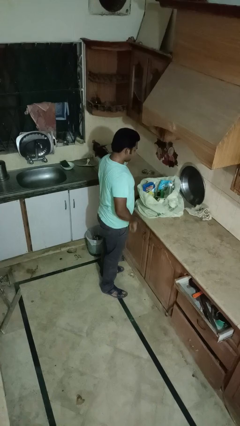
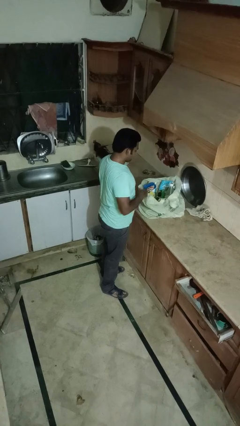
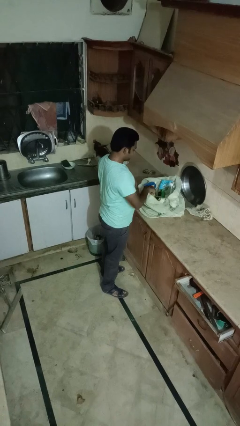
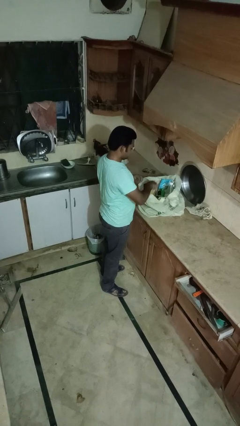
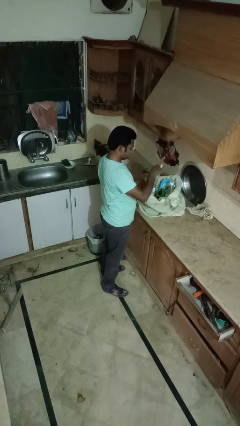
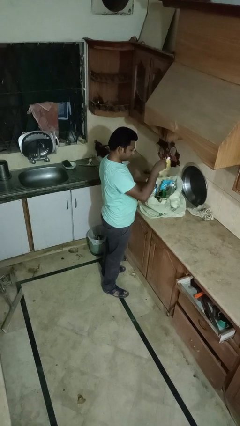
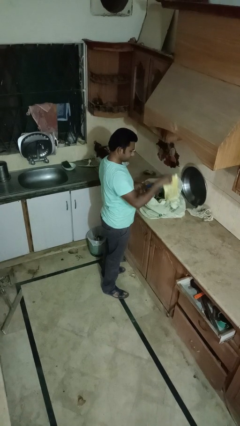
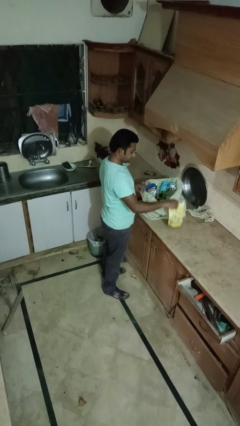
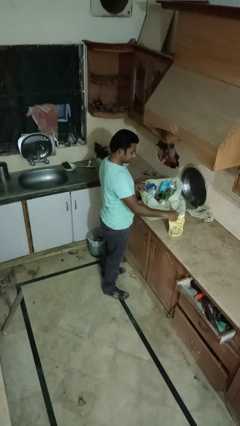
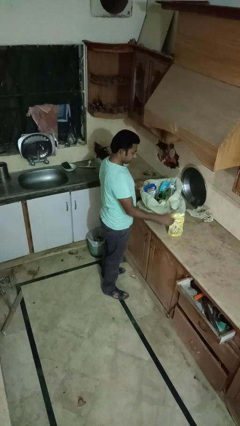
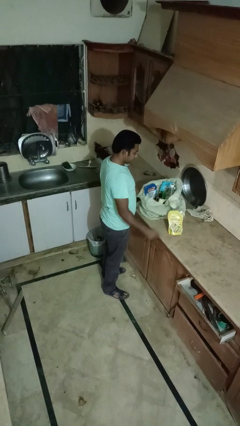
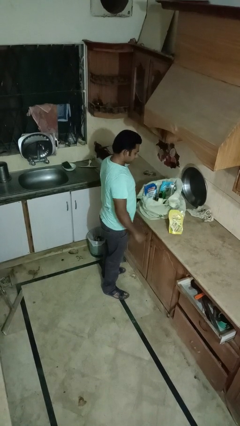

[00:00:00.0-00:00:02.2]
person takes object from bag

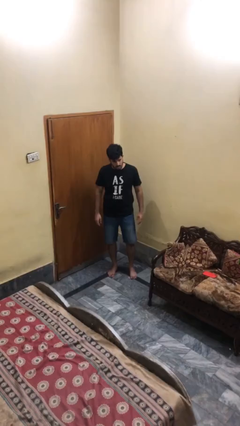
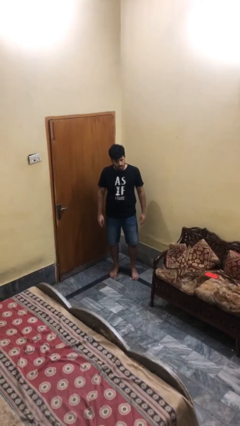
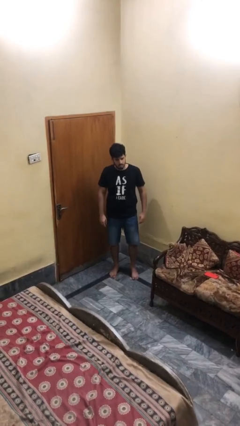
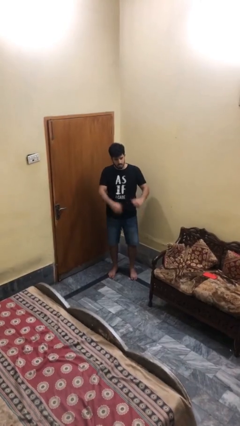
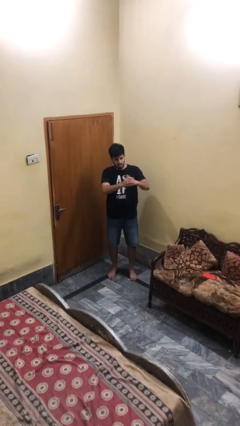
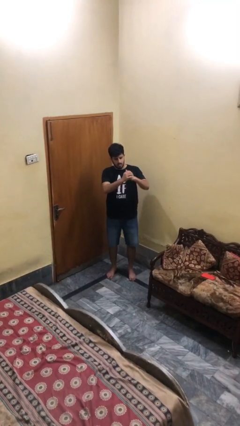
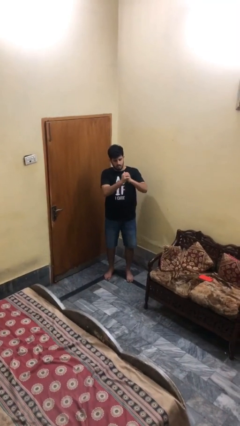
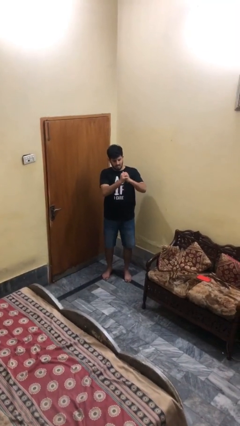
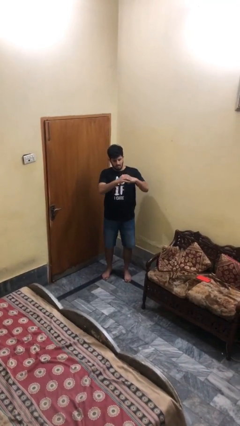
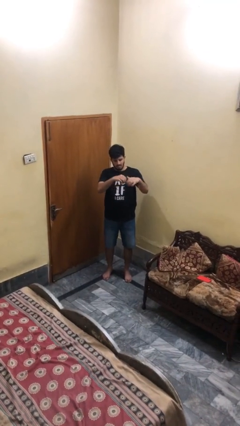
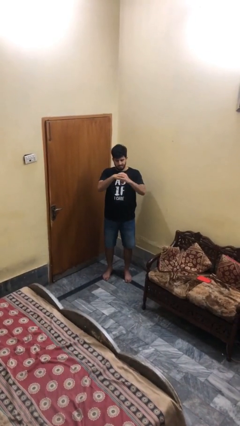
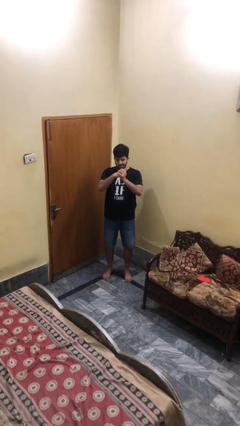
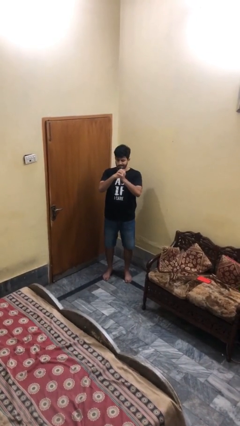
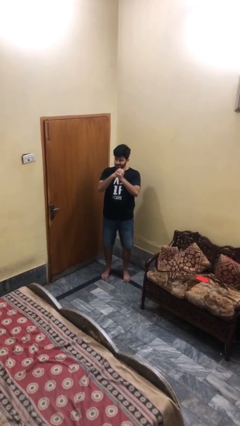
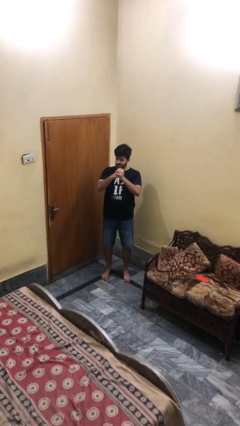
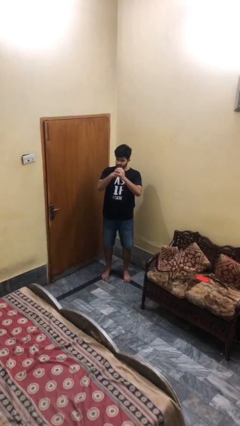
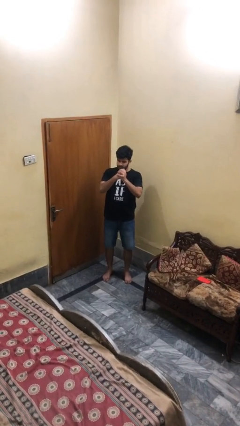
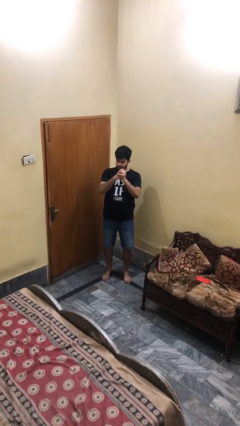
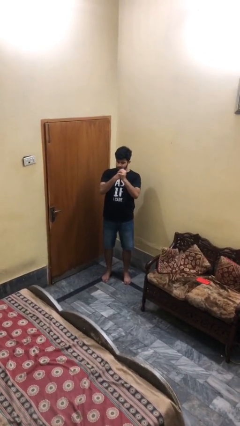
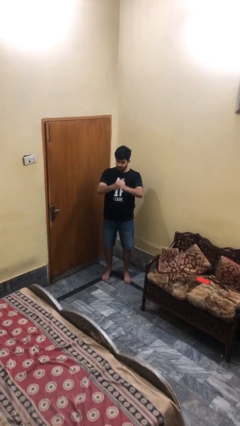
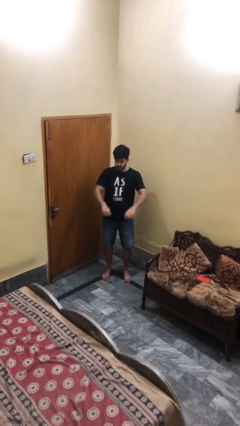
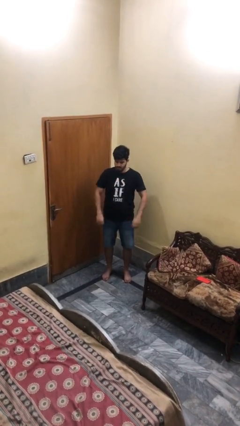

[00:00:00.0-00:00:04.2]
person cracks knuckles

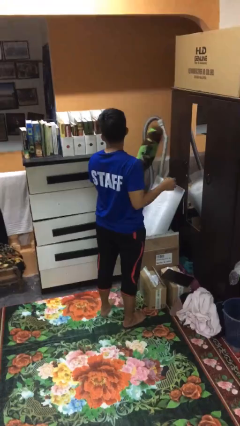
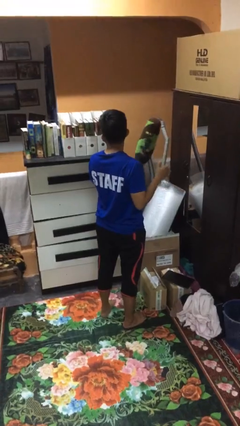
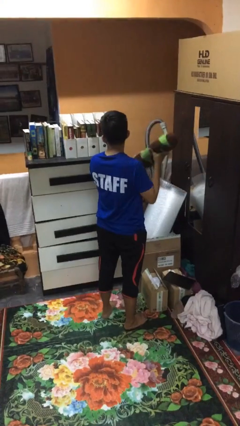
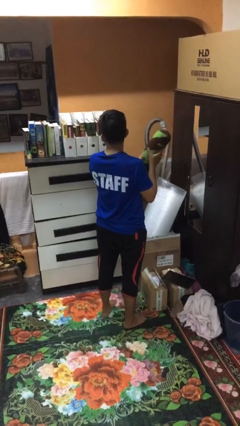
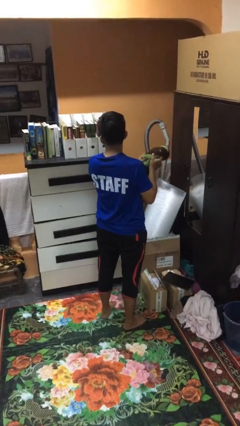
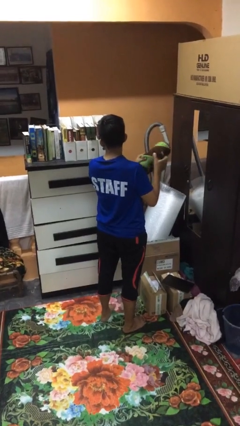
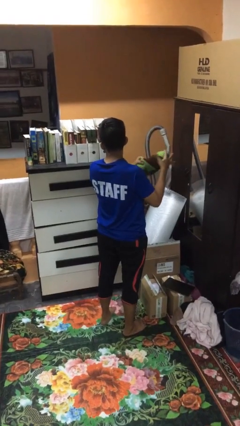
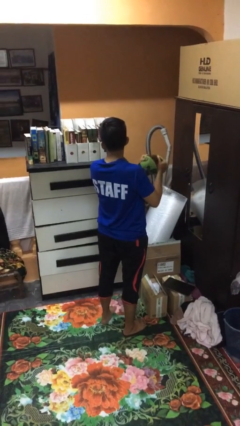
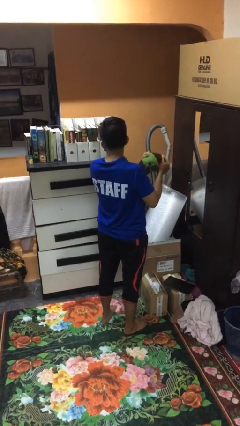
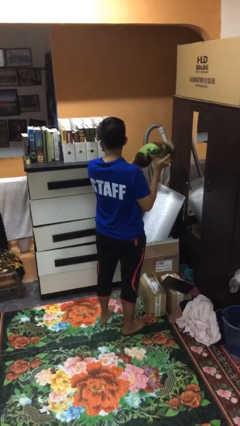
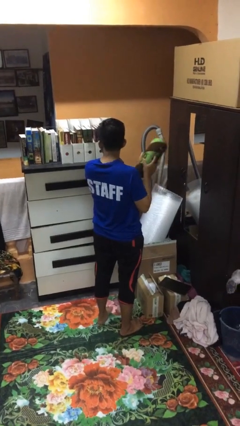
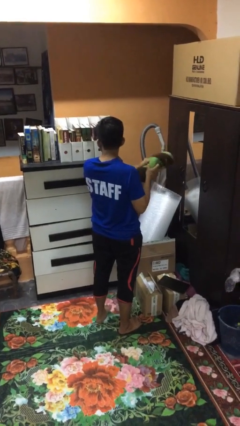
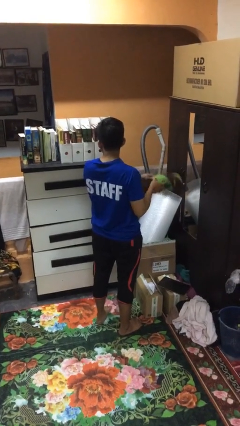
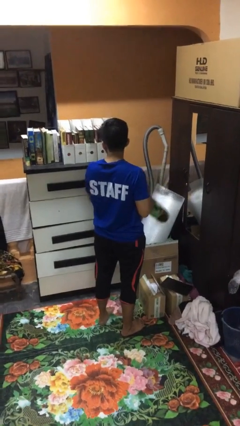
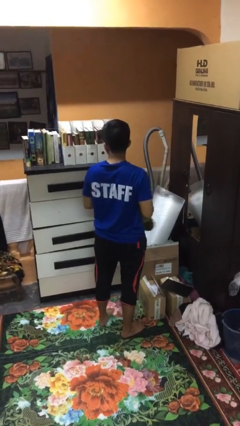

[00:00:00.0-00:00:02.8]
person squeezes object

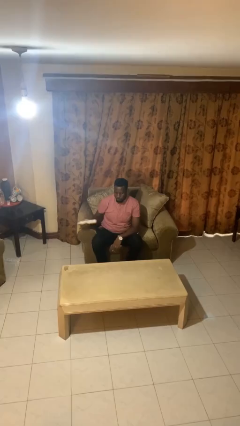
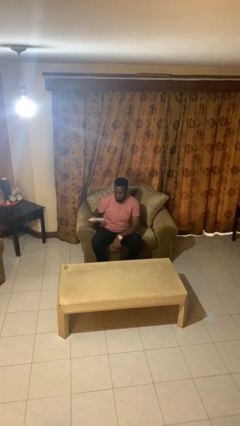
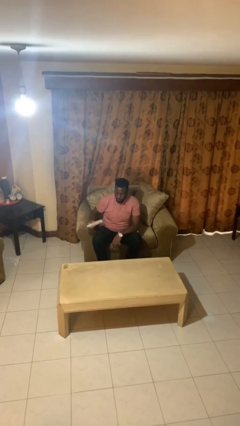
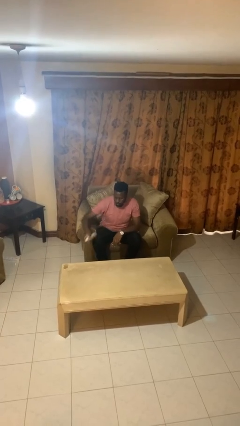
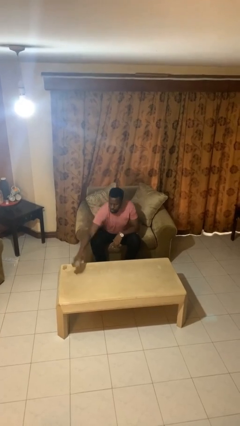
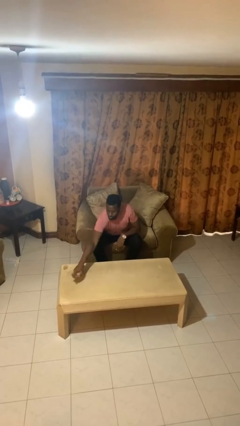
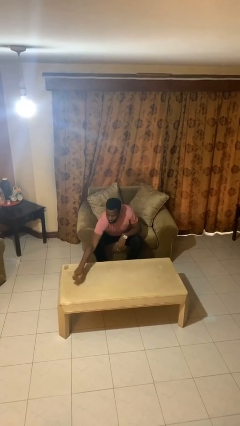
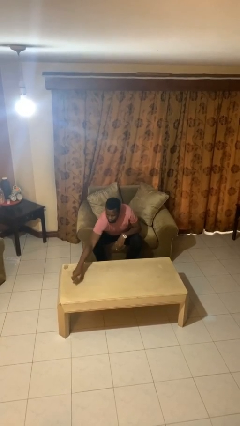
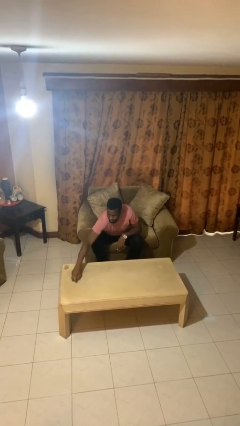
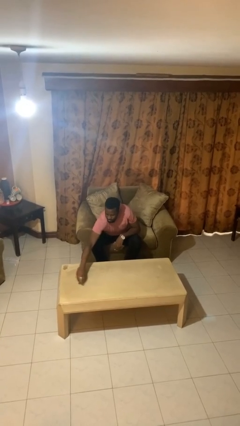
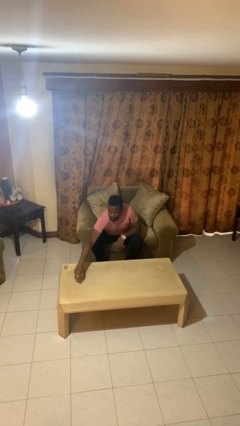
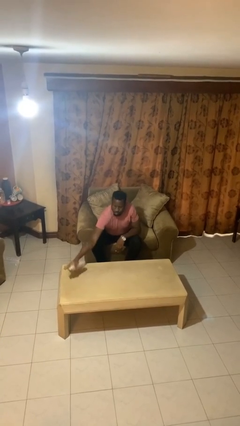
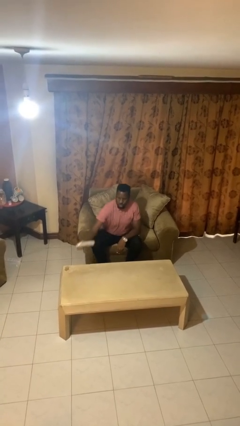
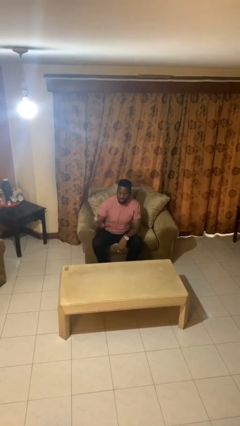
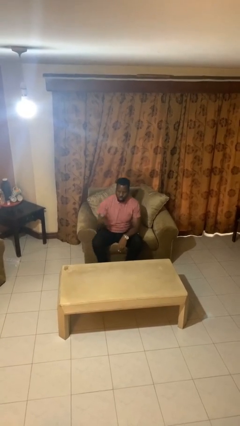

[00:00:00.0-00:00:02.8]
person sprays from bottle

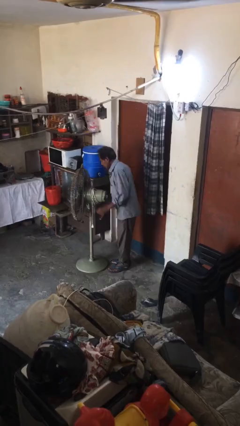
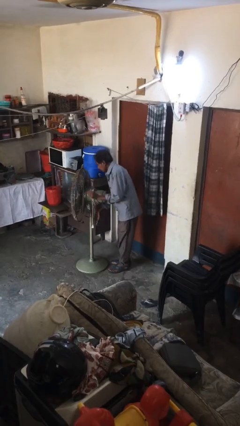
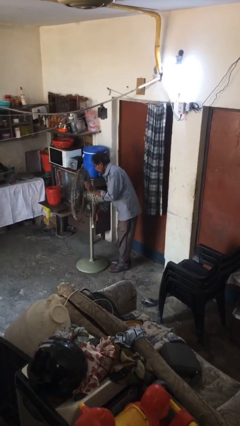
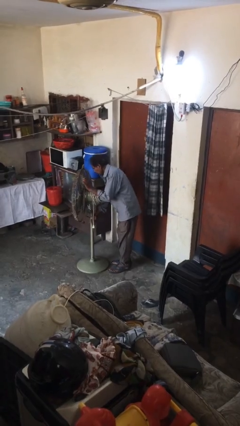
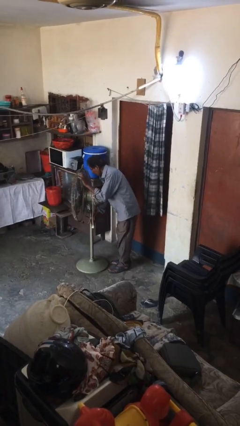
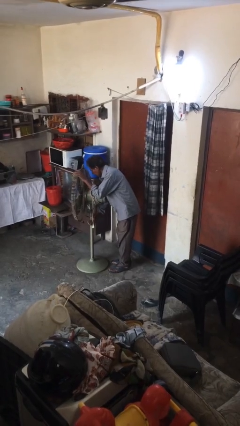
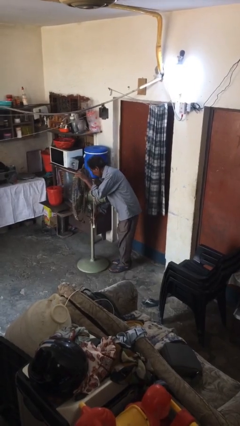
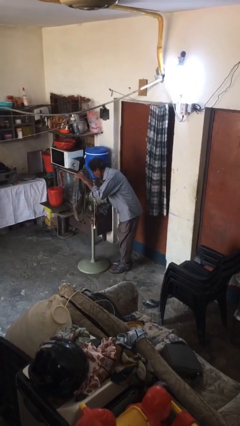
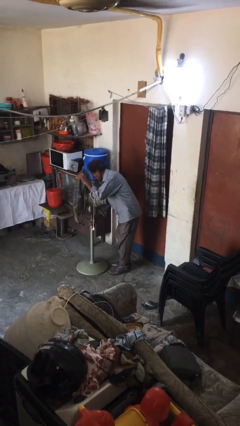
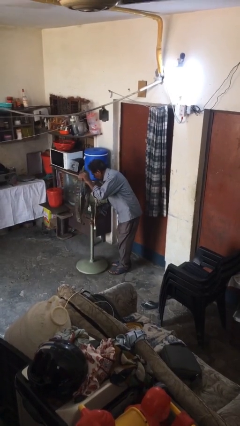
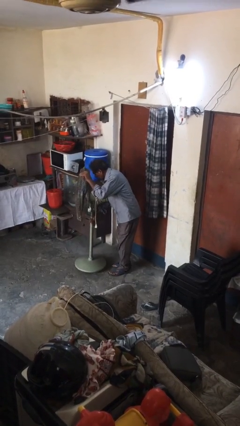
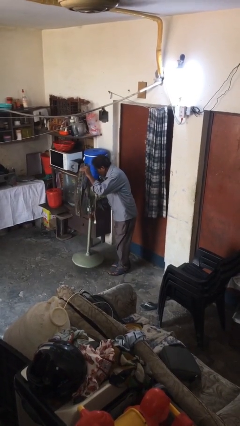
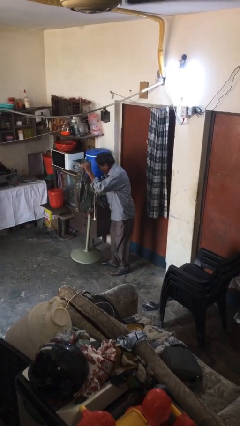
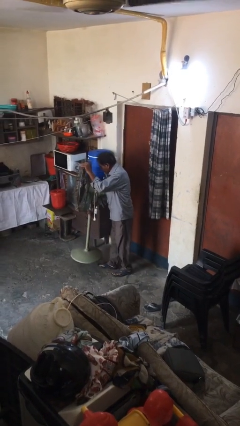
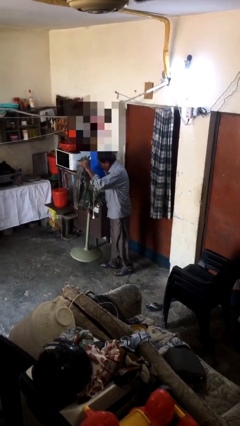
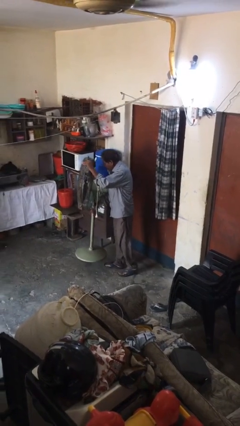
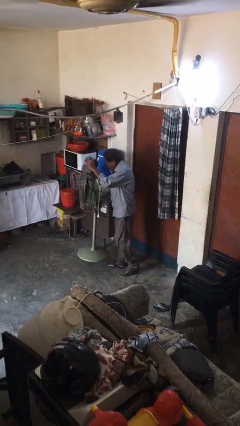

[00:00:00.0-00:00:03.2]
person picks up object from floor

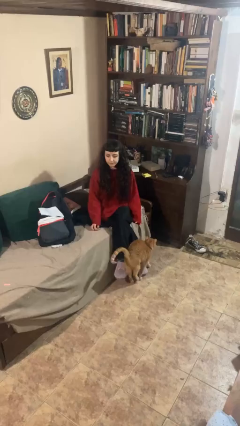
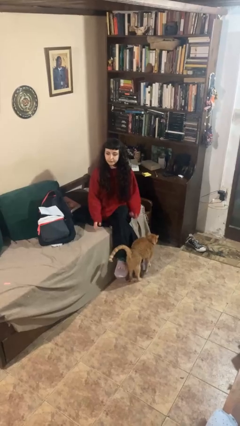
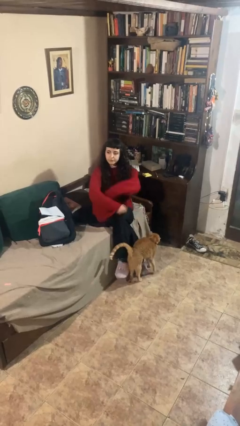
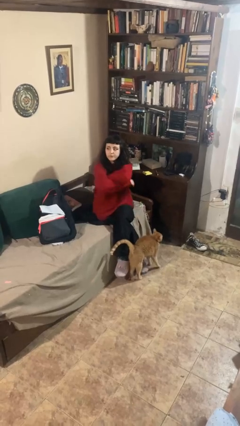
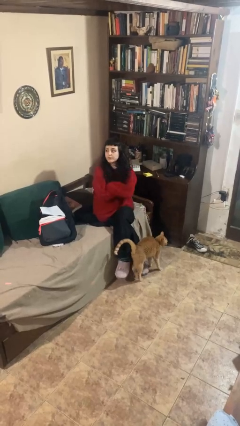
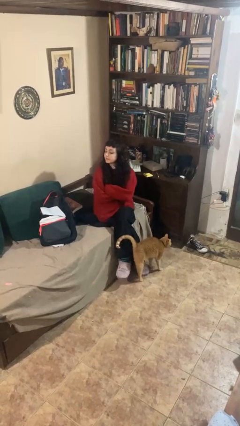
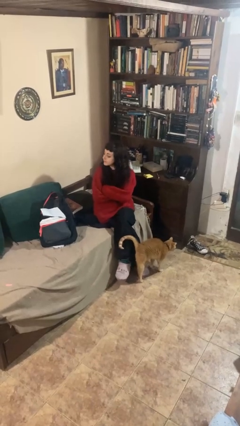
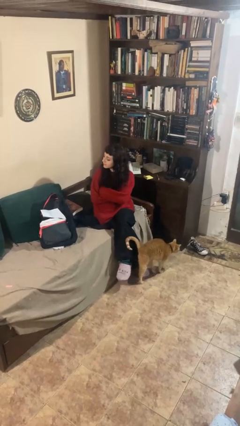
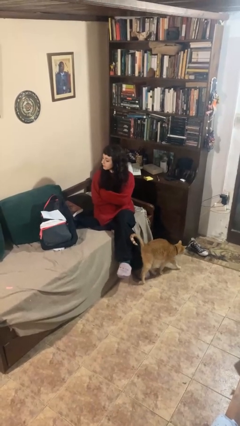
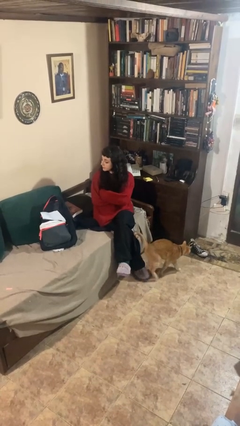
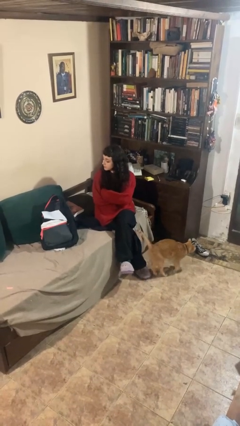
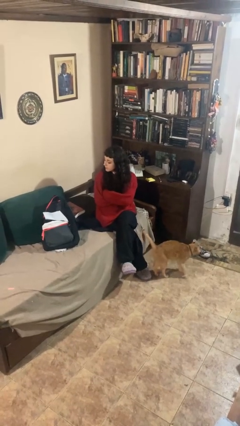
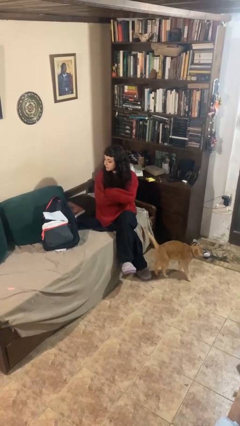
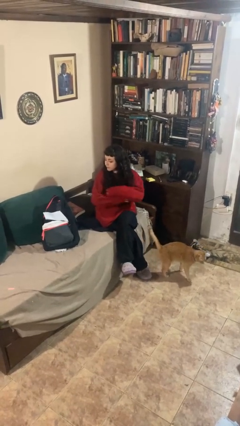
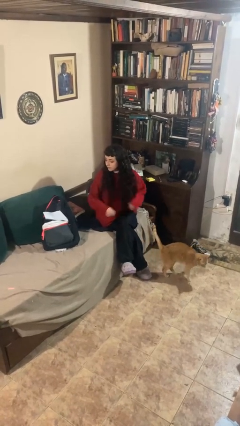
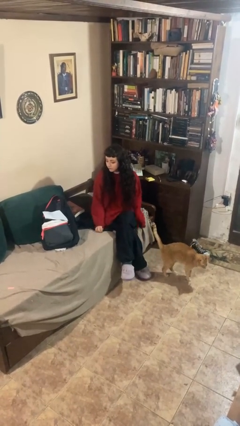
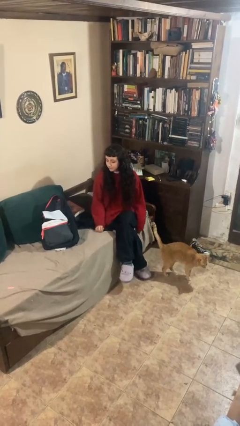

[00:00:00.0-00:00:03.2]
person crosses arms
